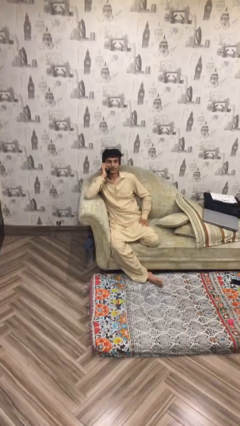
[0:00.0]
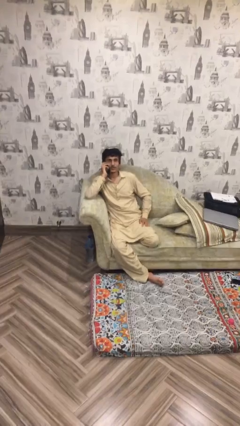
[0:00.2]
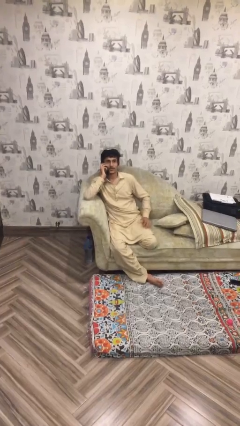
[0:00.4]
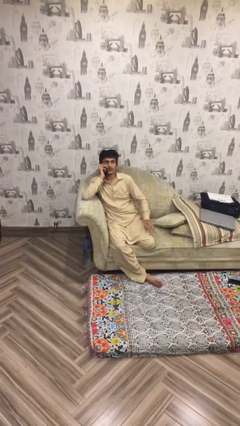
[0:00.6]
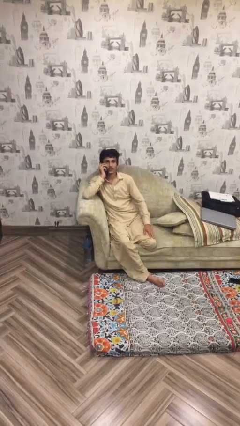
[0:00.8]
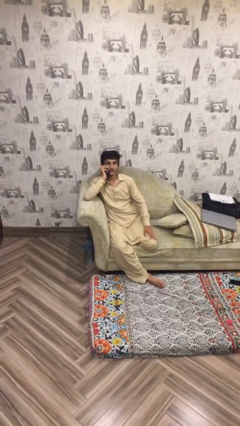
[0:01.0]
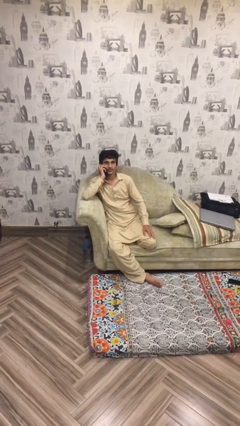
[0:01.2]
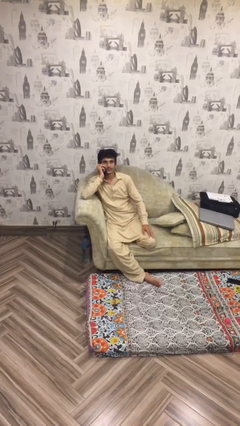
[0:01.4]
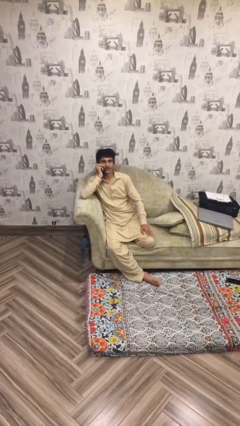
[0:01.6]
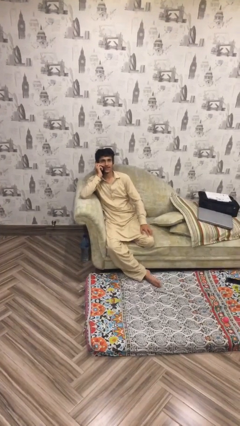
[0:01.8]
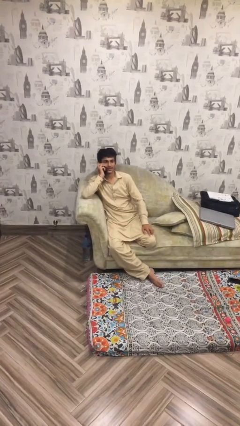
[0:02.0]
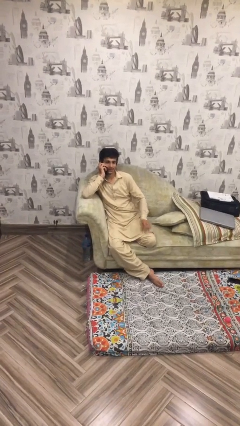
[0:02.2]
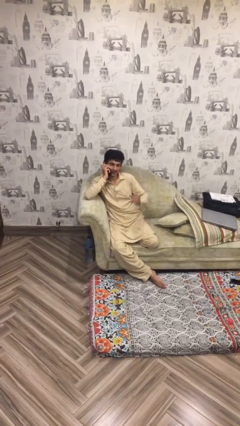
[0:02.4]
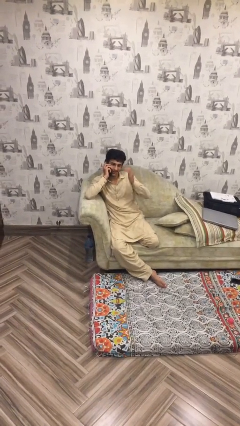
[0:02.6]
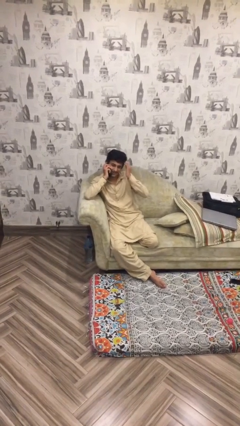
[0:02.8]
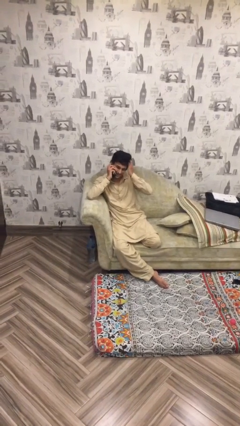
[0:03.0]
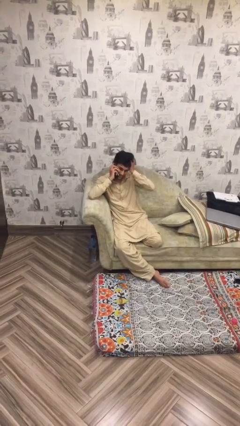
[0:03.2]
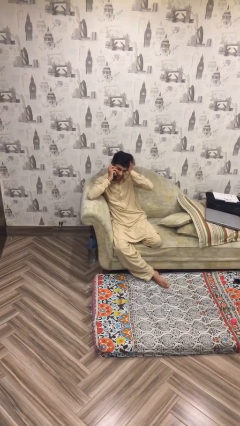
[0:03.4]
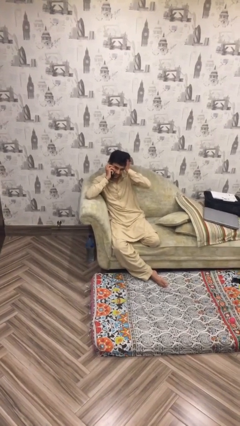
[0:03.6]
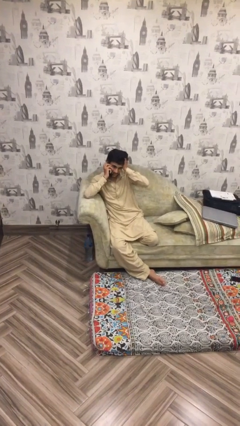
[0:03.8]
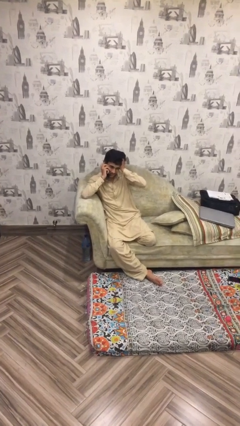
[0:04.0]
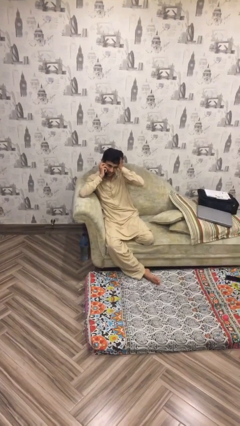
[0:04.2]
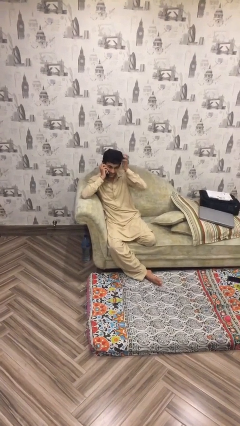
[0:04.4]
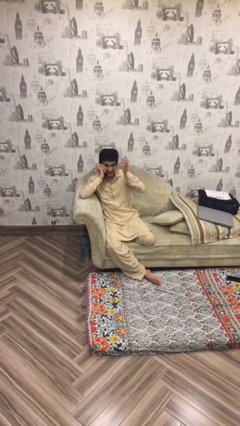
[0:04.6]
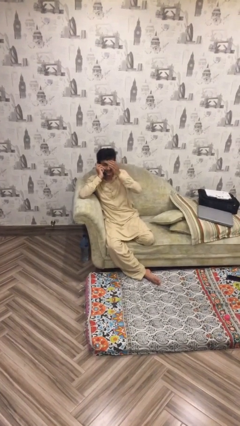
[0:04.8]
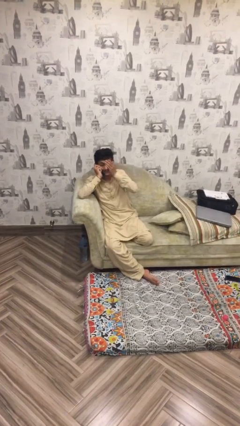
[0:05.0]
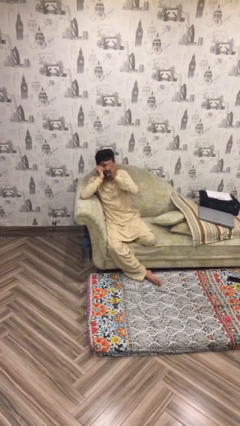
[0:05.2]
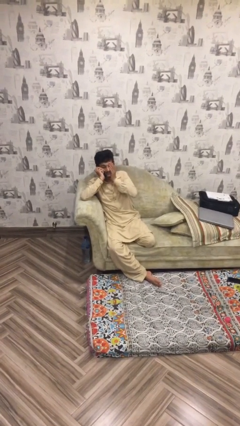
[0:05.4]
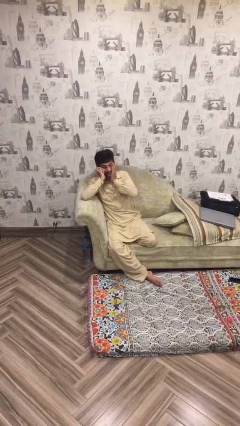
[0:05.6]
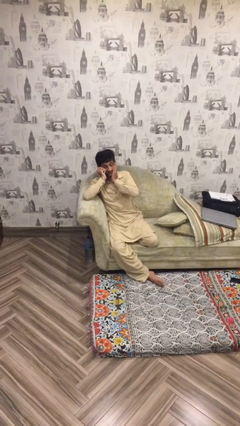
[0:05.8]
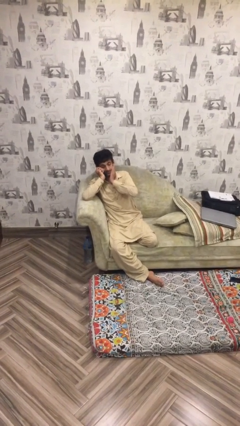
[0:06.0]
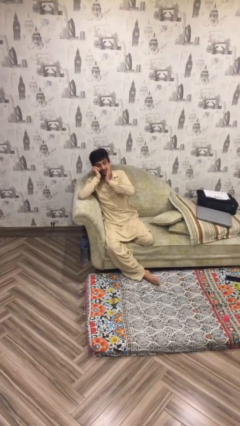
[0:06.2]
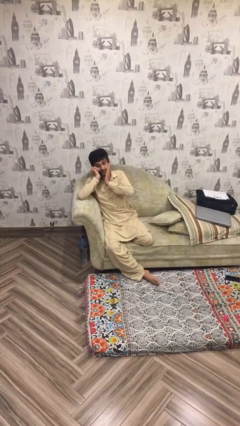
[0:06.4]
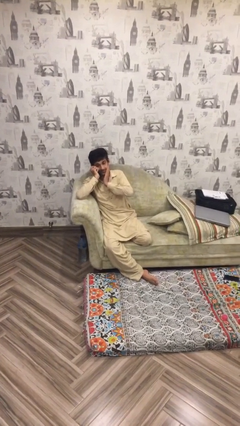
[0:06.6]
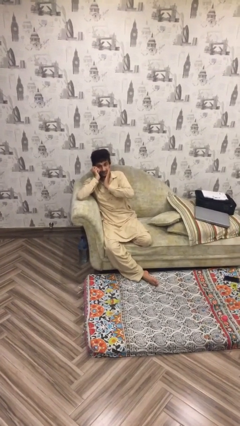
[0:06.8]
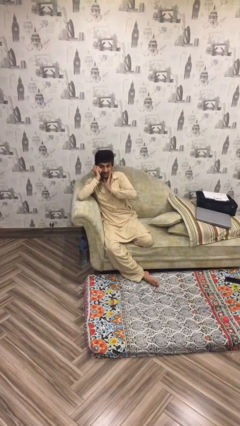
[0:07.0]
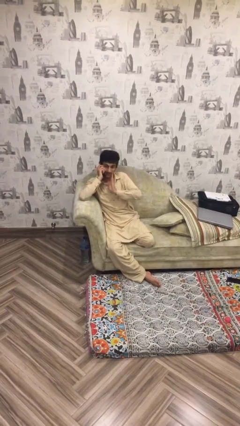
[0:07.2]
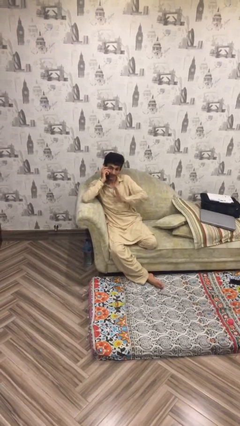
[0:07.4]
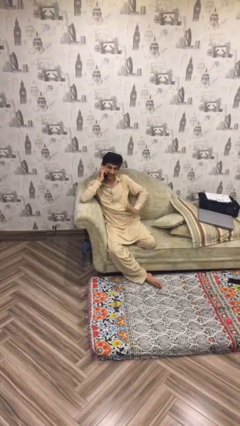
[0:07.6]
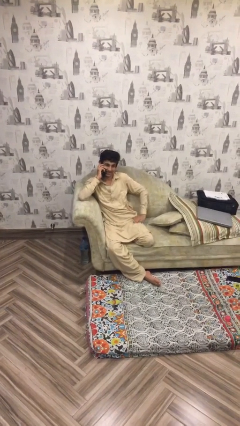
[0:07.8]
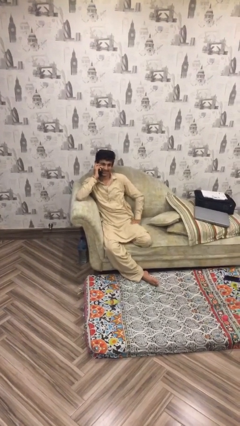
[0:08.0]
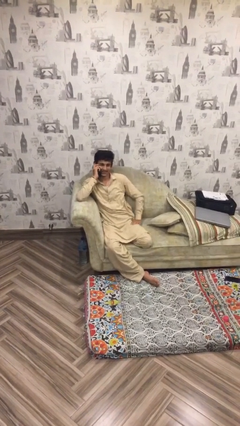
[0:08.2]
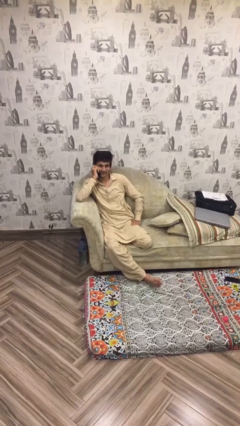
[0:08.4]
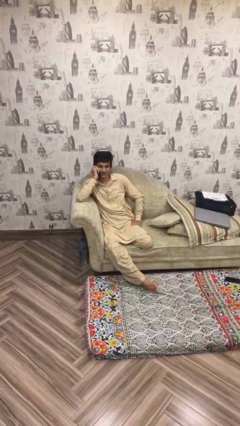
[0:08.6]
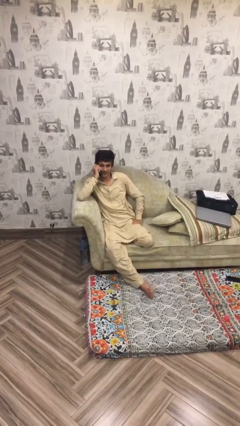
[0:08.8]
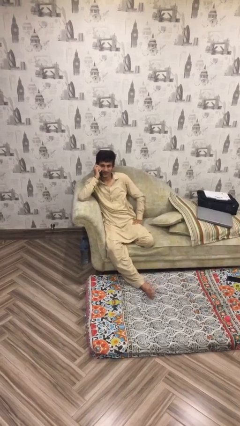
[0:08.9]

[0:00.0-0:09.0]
person talks on phone

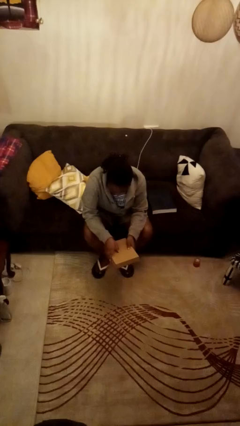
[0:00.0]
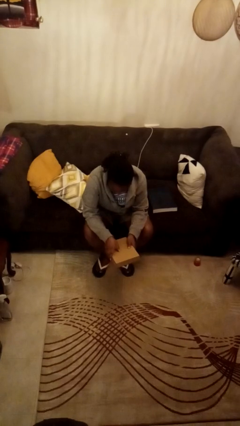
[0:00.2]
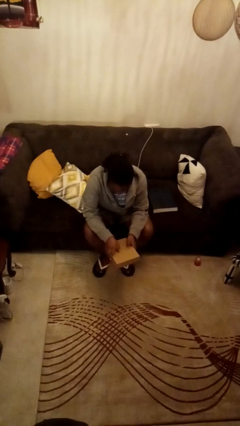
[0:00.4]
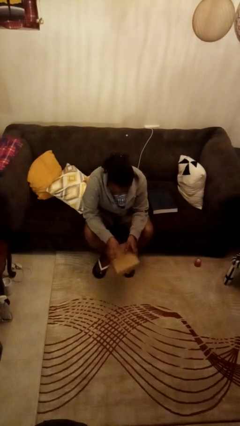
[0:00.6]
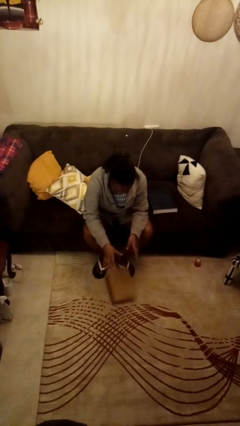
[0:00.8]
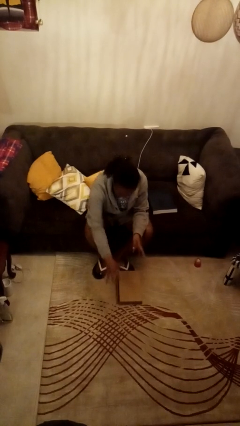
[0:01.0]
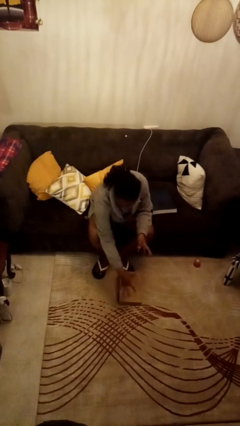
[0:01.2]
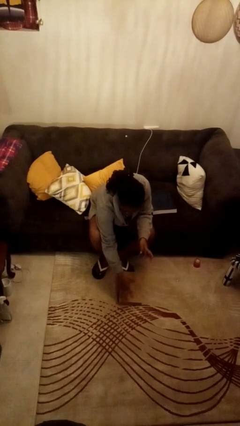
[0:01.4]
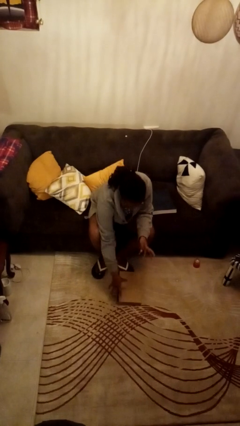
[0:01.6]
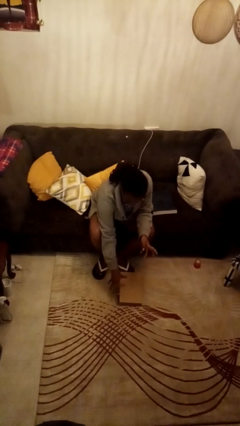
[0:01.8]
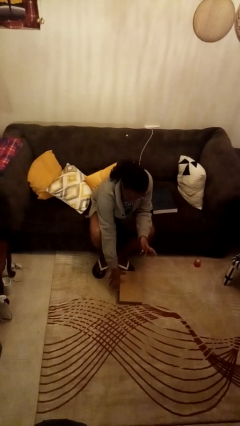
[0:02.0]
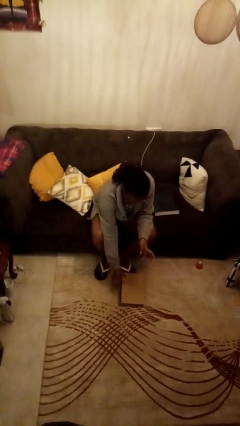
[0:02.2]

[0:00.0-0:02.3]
person drops object

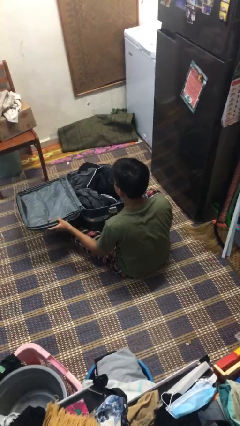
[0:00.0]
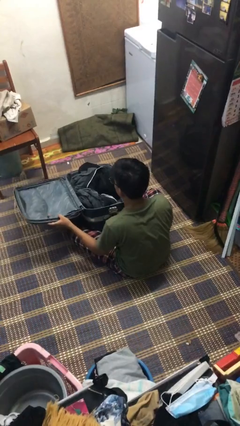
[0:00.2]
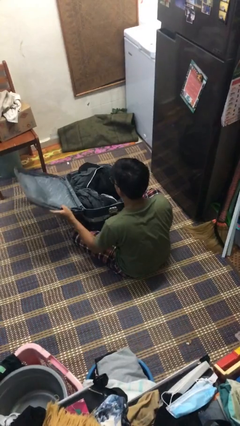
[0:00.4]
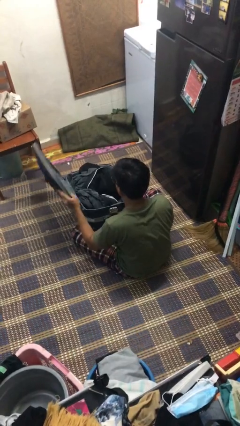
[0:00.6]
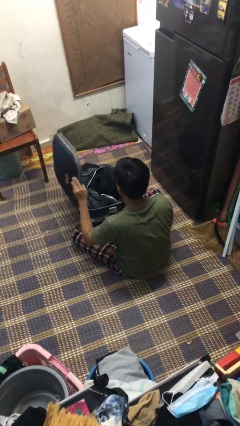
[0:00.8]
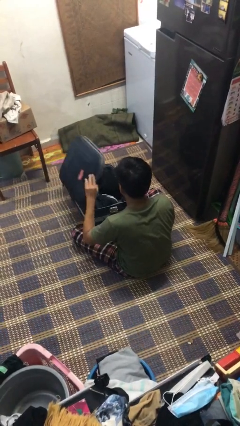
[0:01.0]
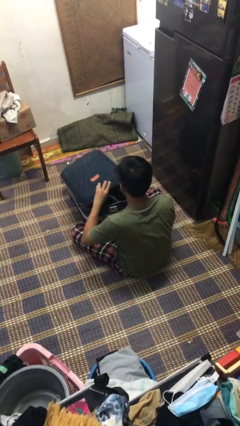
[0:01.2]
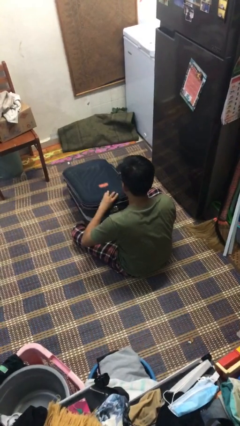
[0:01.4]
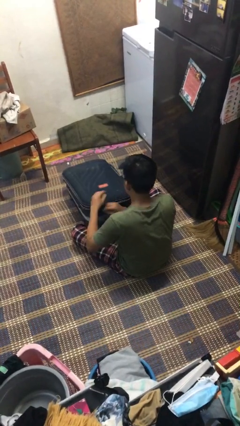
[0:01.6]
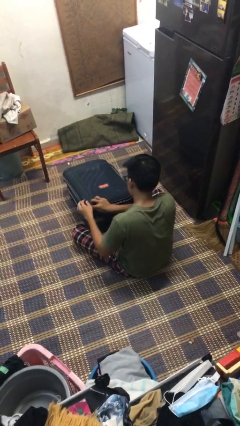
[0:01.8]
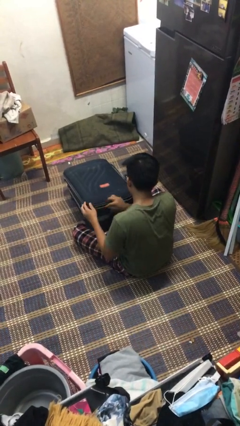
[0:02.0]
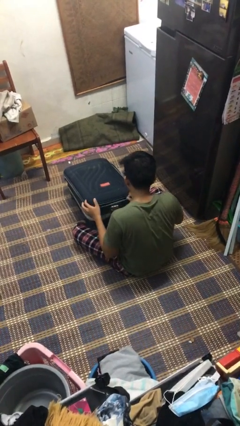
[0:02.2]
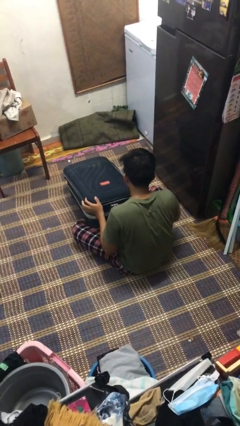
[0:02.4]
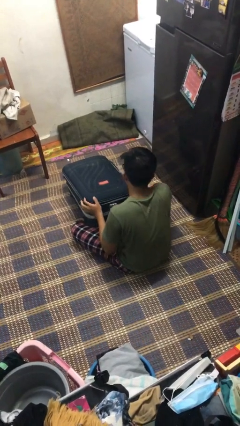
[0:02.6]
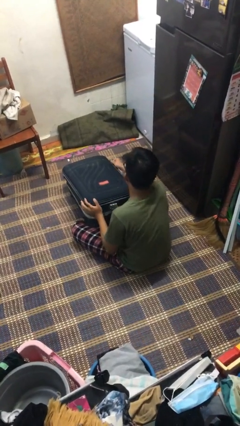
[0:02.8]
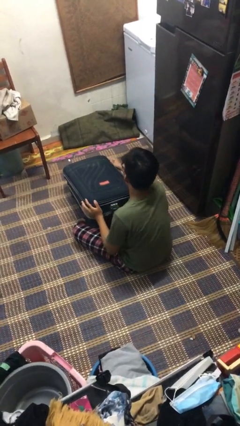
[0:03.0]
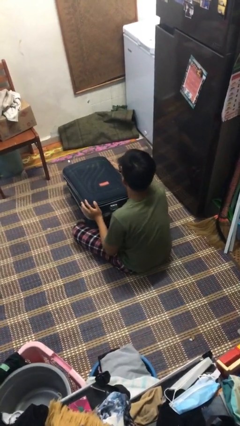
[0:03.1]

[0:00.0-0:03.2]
person closes suitcase

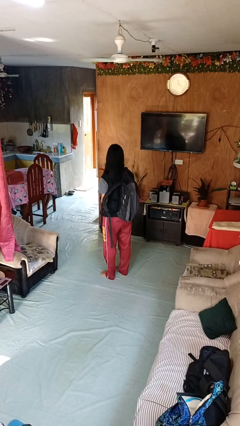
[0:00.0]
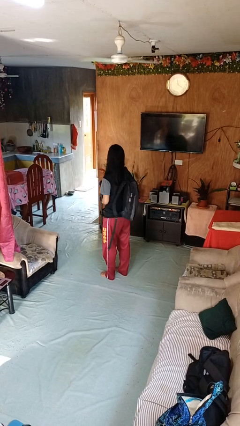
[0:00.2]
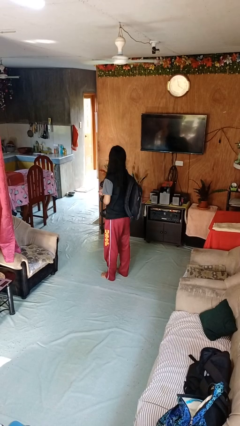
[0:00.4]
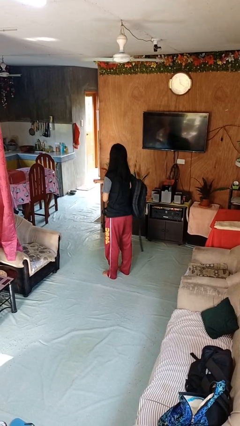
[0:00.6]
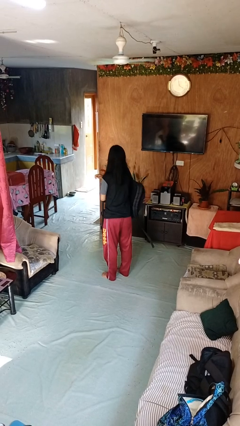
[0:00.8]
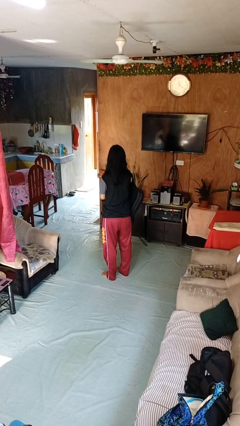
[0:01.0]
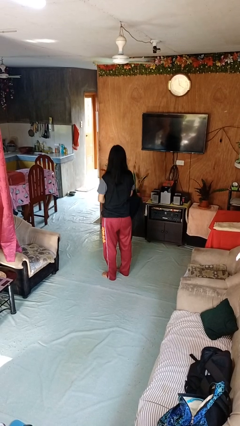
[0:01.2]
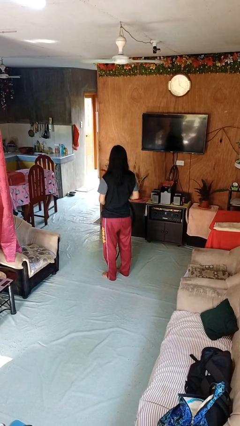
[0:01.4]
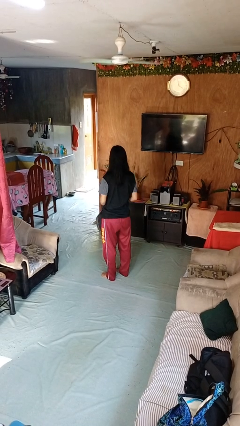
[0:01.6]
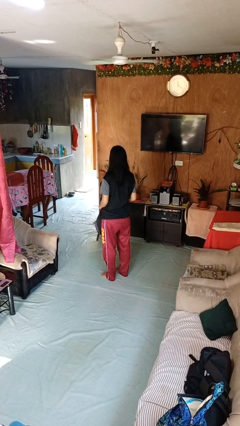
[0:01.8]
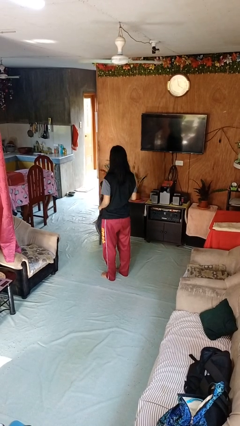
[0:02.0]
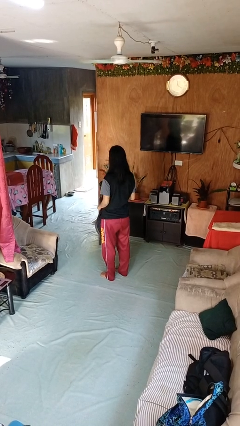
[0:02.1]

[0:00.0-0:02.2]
person takes off backpack

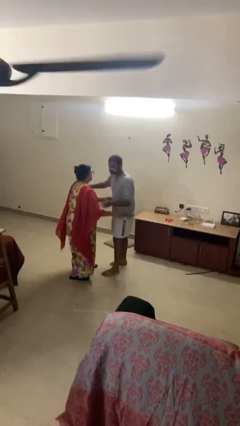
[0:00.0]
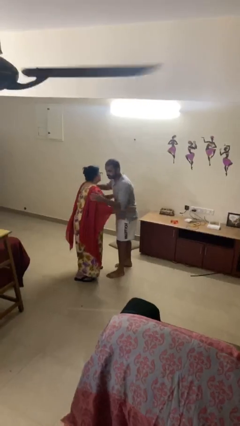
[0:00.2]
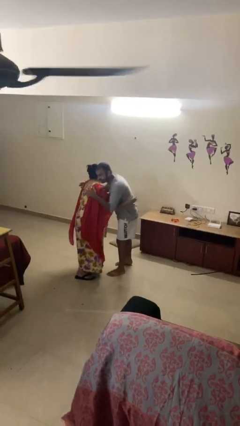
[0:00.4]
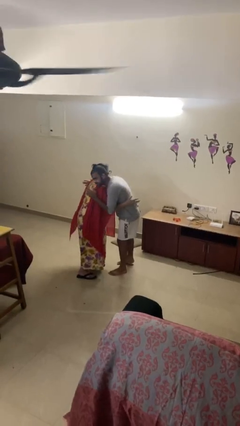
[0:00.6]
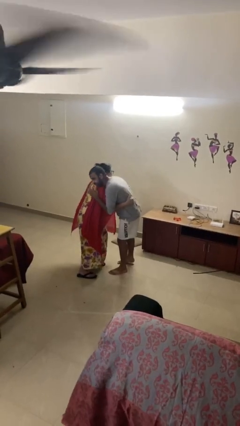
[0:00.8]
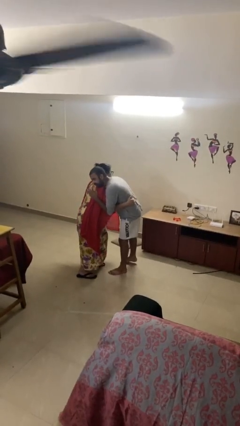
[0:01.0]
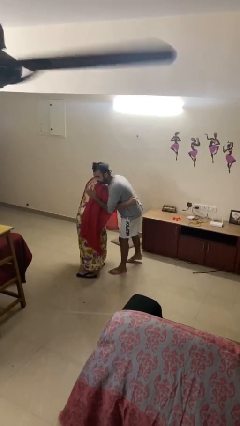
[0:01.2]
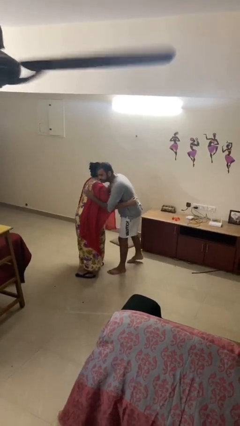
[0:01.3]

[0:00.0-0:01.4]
person embraces person
